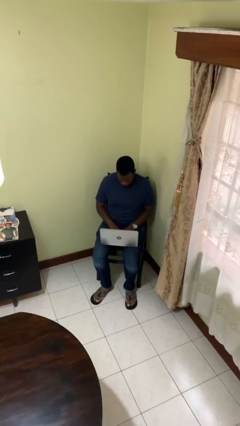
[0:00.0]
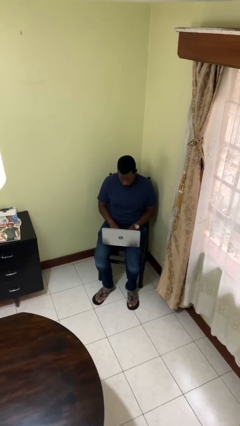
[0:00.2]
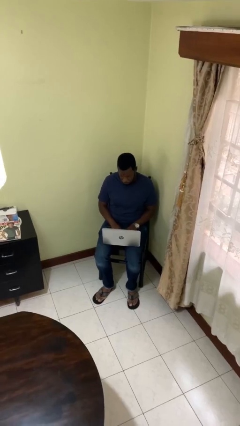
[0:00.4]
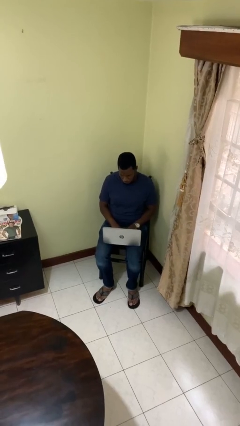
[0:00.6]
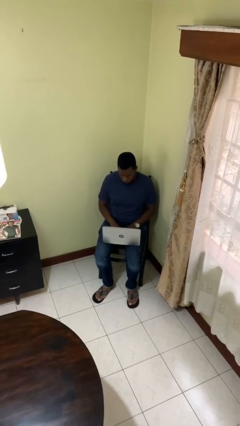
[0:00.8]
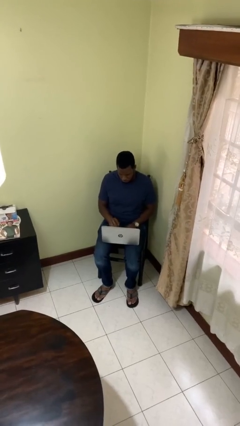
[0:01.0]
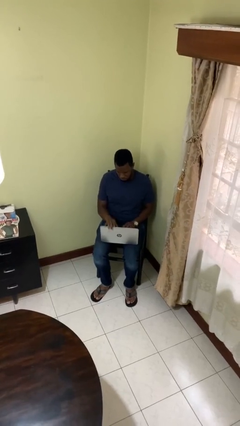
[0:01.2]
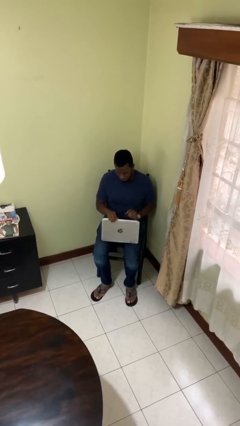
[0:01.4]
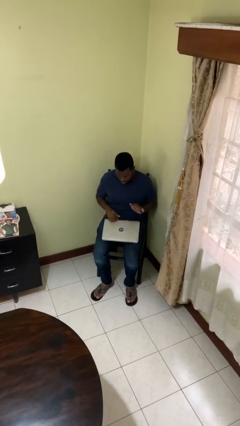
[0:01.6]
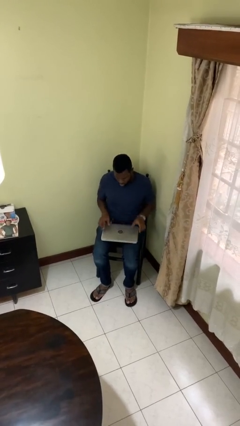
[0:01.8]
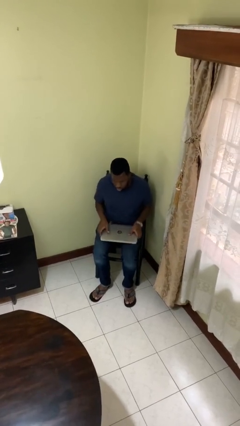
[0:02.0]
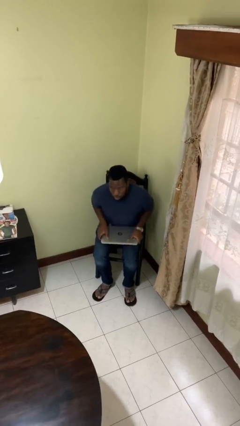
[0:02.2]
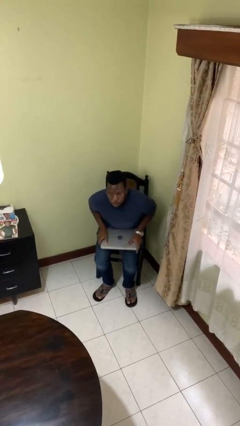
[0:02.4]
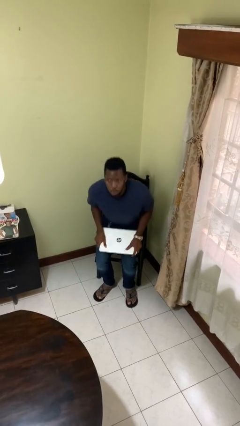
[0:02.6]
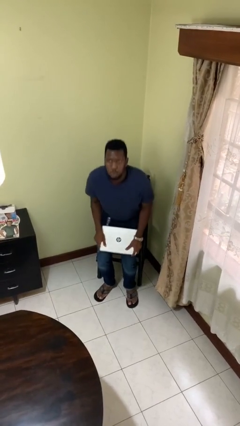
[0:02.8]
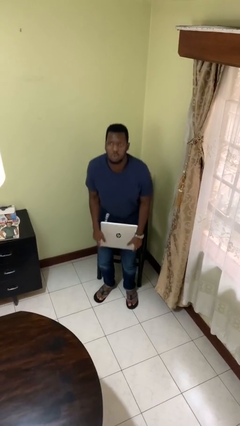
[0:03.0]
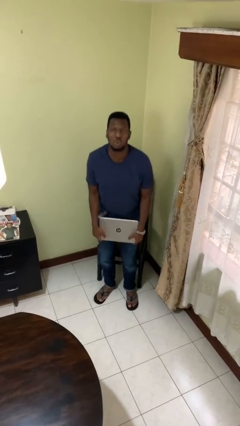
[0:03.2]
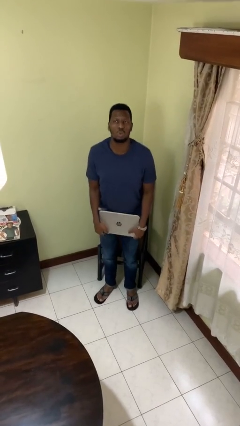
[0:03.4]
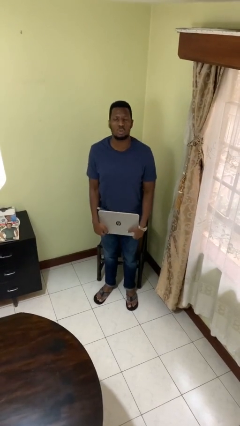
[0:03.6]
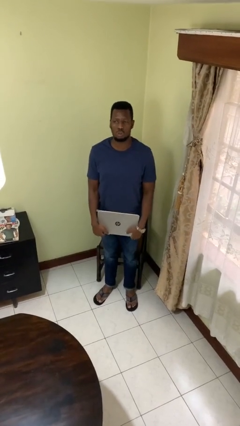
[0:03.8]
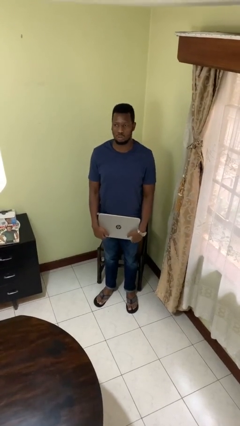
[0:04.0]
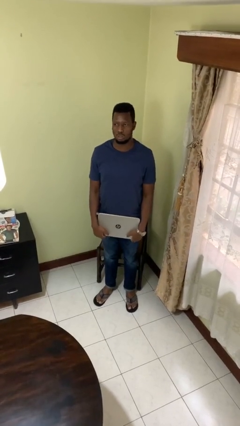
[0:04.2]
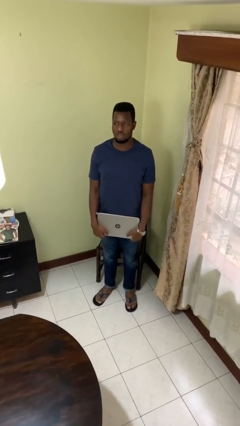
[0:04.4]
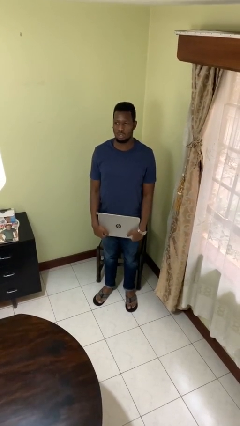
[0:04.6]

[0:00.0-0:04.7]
person stands up

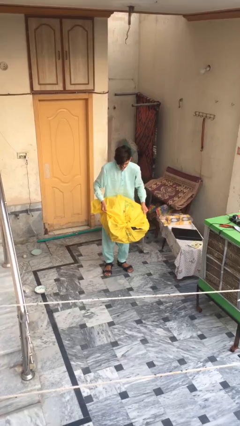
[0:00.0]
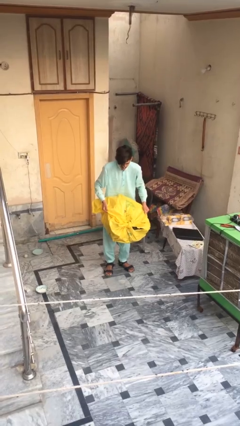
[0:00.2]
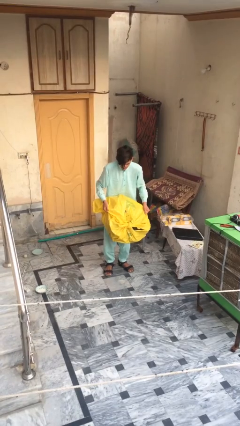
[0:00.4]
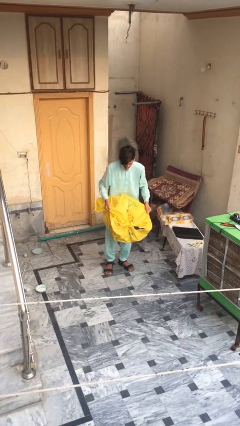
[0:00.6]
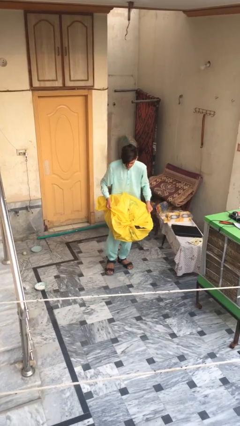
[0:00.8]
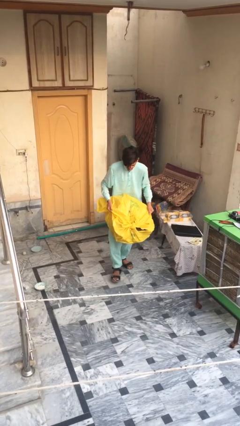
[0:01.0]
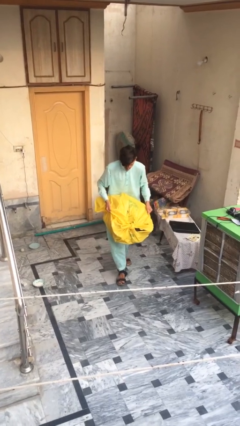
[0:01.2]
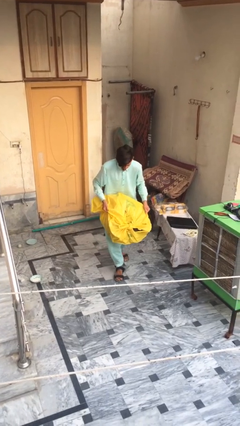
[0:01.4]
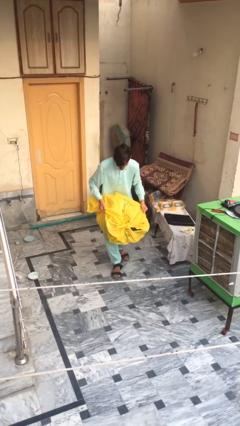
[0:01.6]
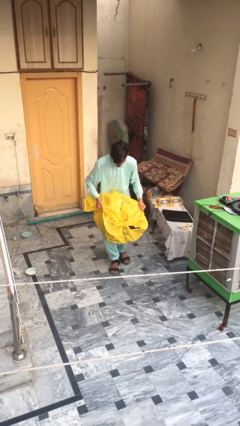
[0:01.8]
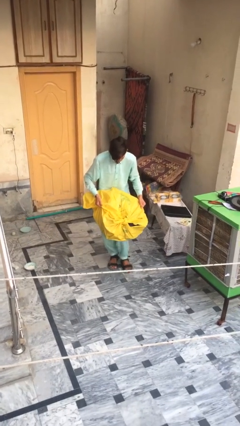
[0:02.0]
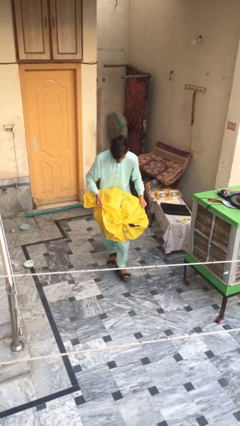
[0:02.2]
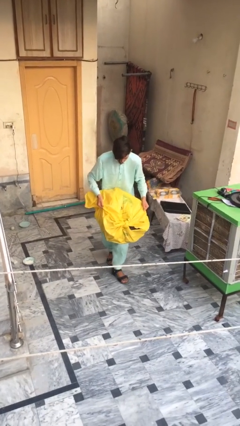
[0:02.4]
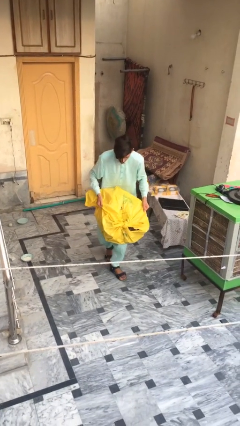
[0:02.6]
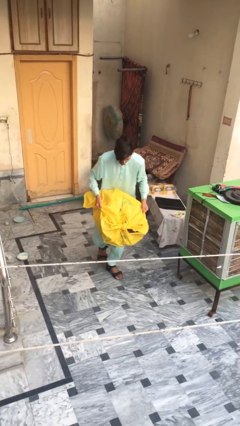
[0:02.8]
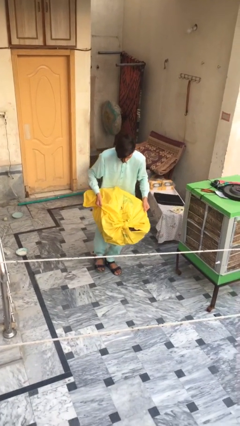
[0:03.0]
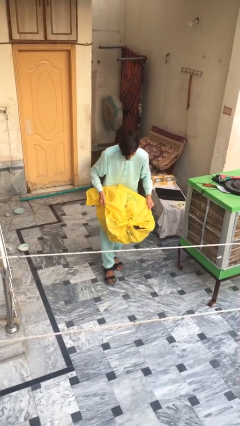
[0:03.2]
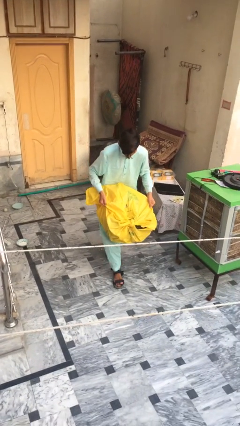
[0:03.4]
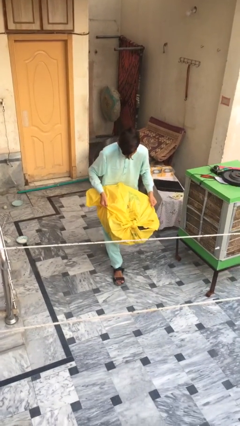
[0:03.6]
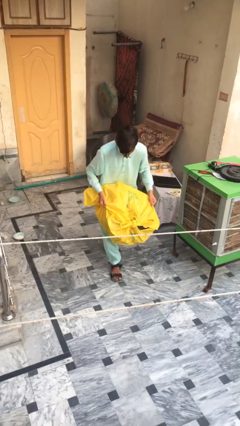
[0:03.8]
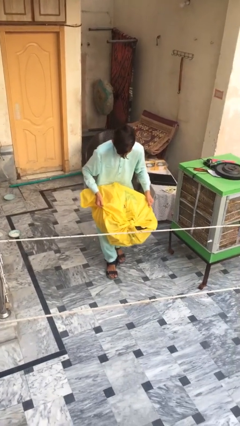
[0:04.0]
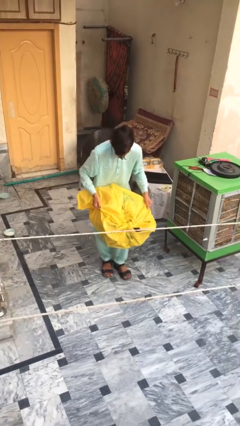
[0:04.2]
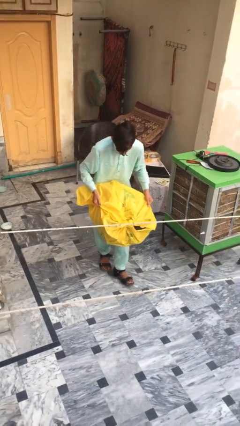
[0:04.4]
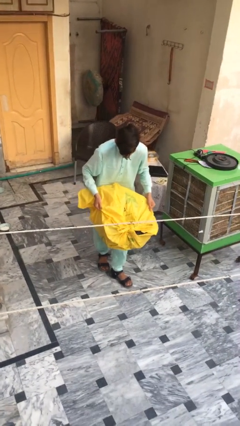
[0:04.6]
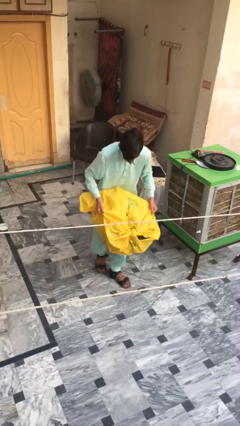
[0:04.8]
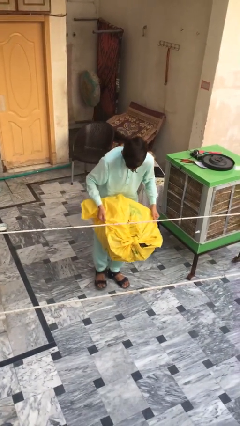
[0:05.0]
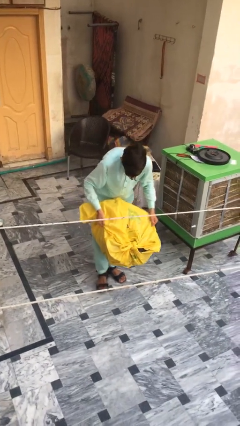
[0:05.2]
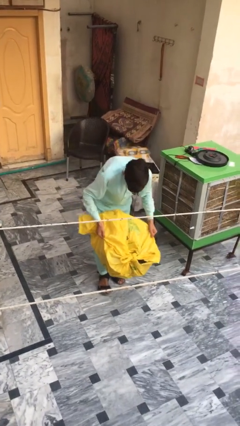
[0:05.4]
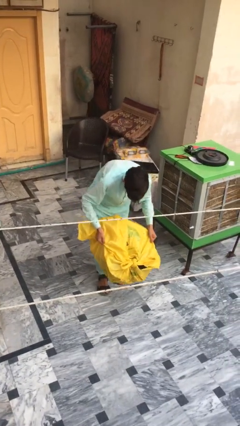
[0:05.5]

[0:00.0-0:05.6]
person carries heavy object

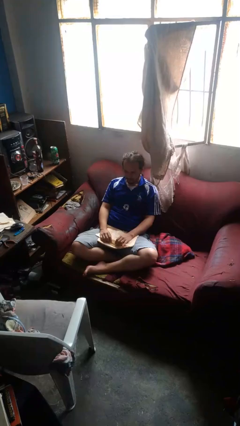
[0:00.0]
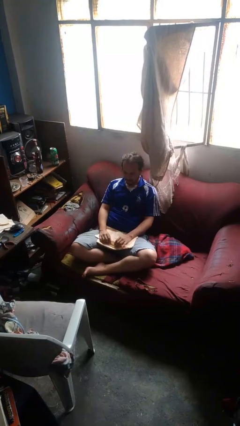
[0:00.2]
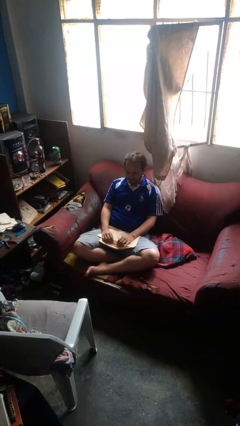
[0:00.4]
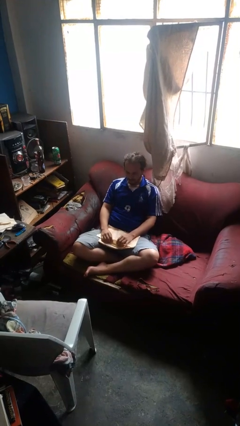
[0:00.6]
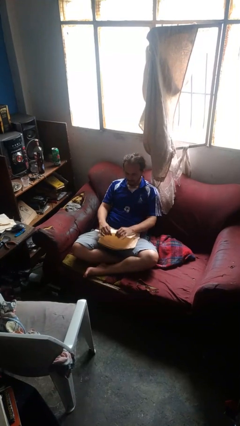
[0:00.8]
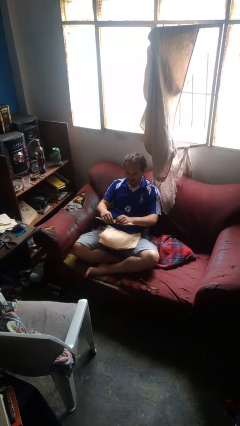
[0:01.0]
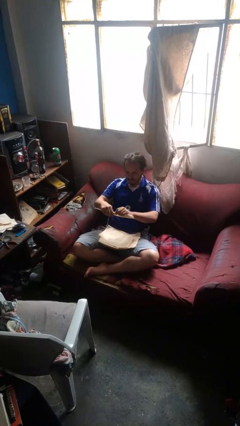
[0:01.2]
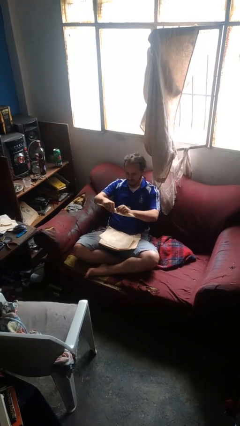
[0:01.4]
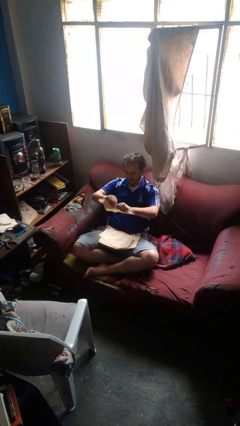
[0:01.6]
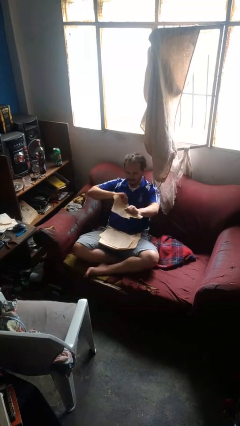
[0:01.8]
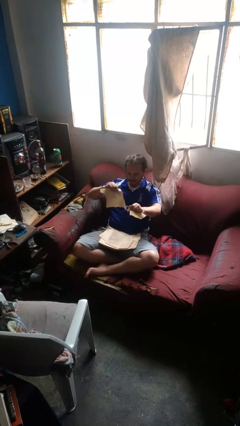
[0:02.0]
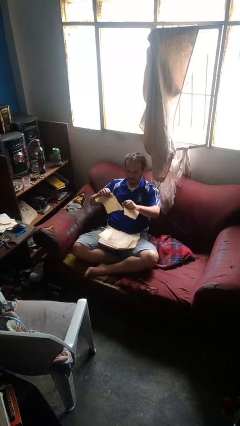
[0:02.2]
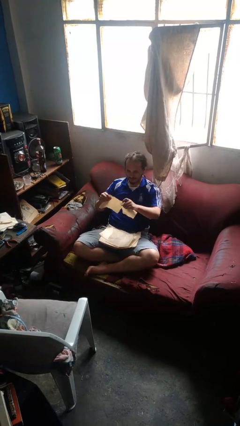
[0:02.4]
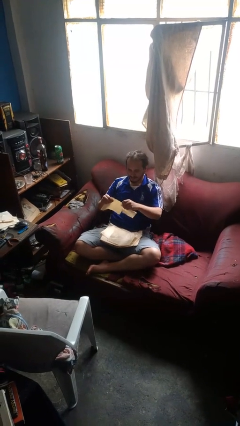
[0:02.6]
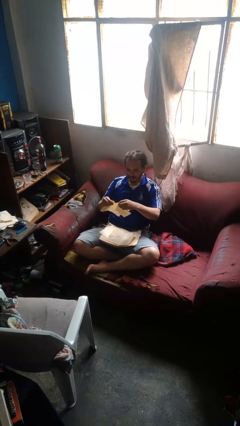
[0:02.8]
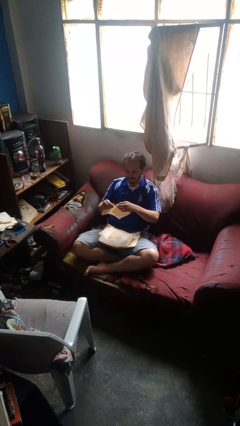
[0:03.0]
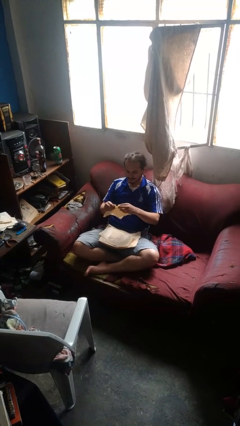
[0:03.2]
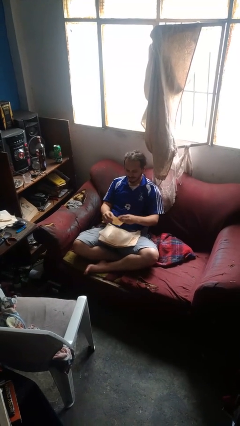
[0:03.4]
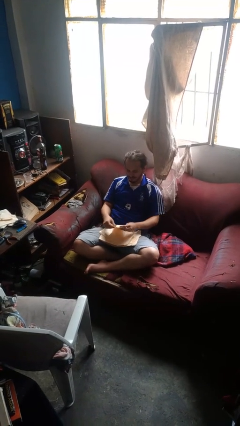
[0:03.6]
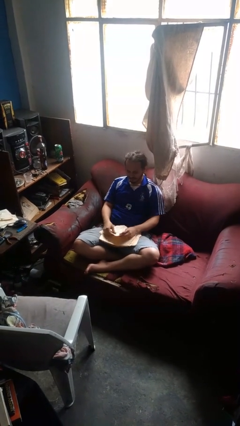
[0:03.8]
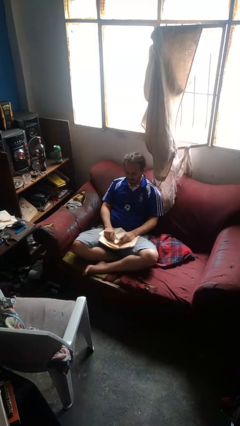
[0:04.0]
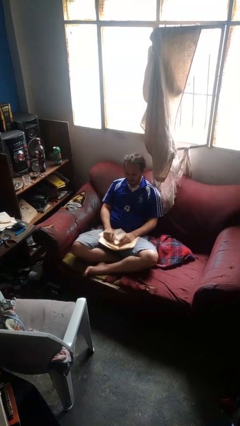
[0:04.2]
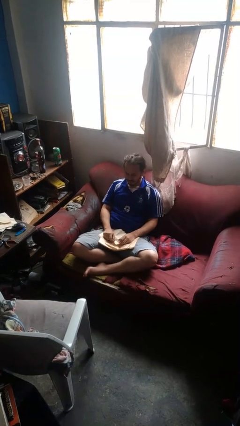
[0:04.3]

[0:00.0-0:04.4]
person tears paper

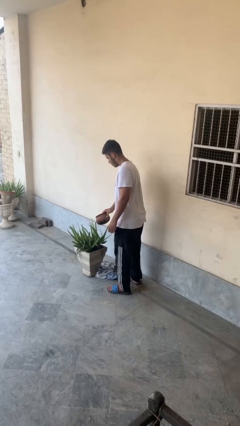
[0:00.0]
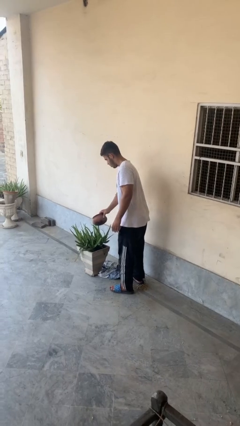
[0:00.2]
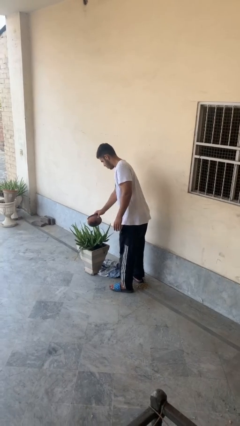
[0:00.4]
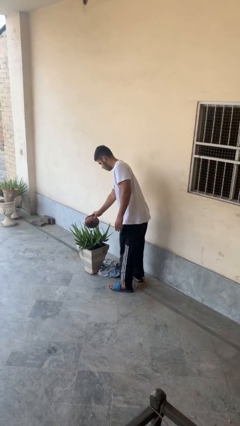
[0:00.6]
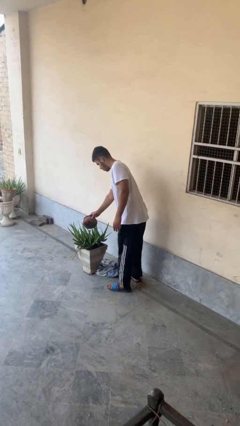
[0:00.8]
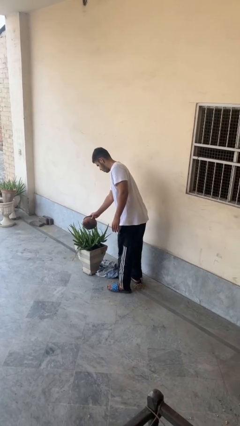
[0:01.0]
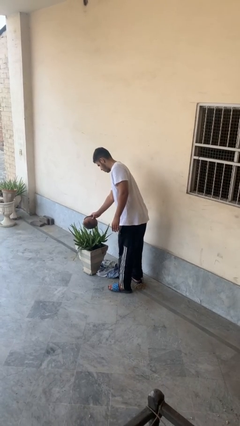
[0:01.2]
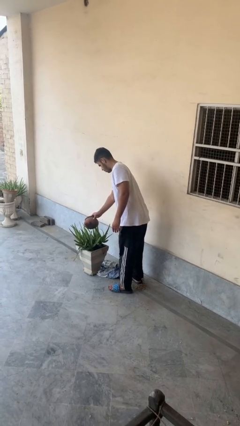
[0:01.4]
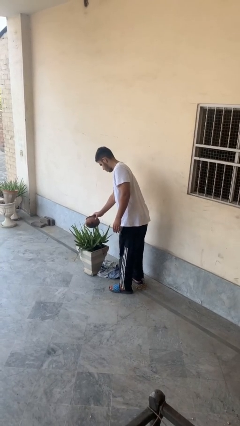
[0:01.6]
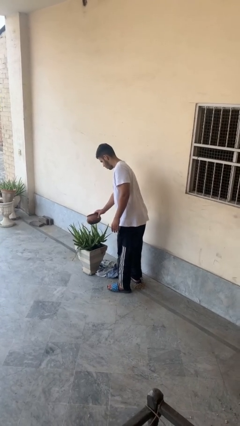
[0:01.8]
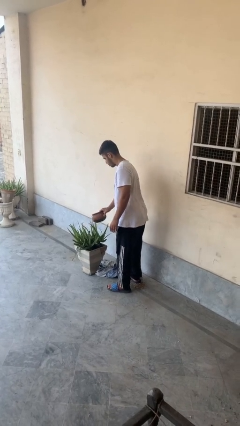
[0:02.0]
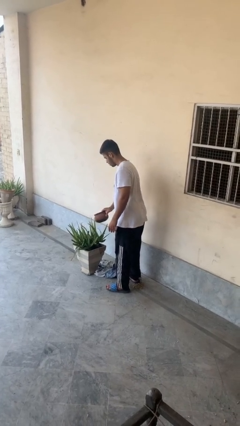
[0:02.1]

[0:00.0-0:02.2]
person waters houseplant

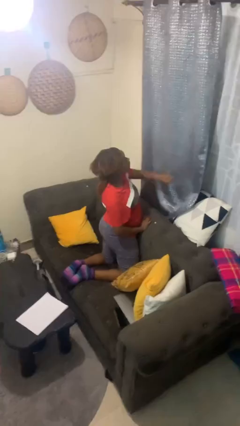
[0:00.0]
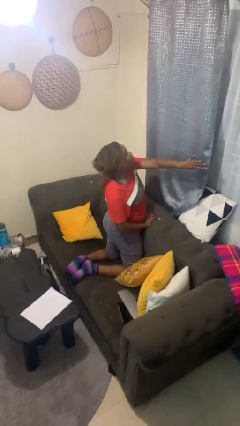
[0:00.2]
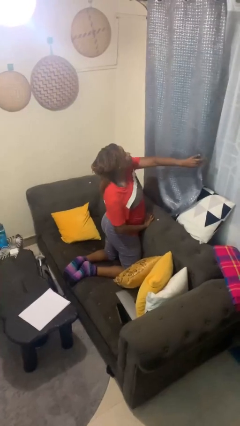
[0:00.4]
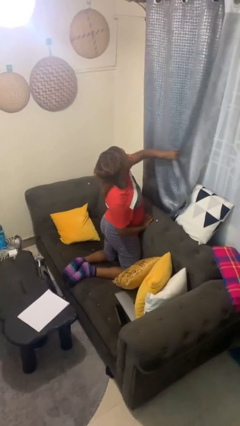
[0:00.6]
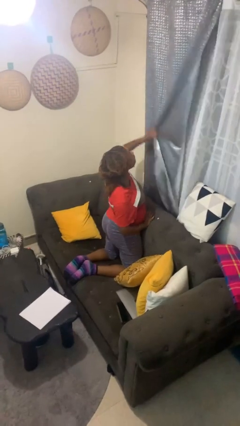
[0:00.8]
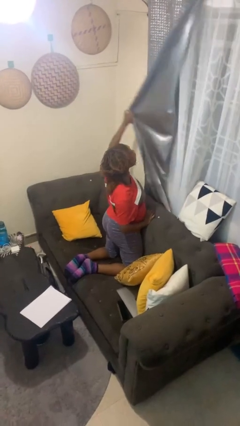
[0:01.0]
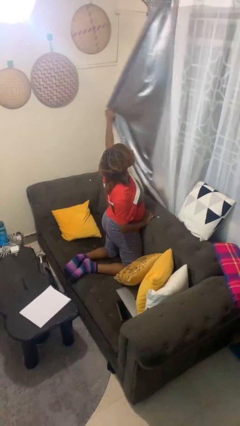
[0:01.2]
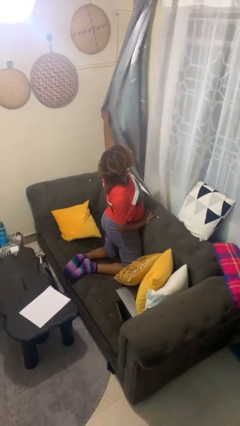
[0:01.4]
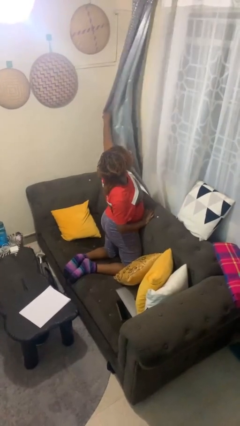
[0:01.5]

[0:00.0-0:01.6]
person opens curtains
